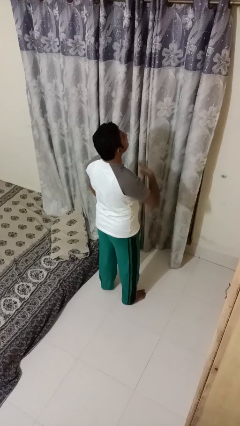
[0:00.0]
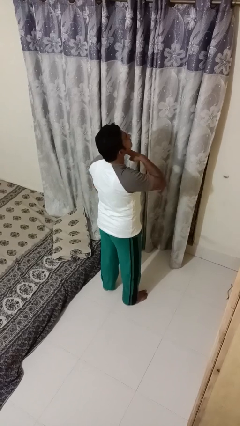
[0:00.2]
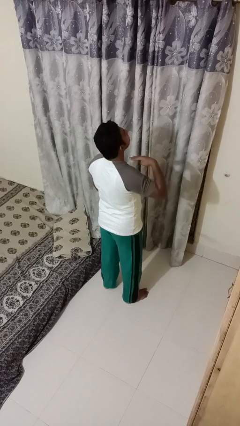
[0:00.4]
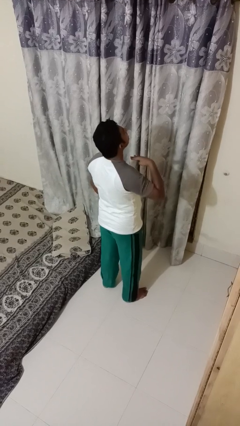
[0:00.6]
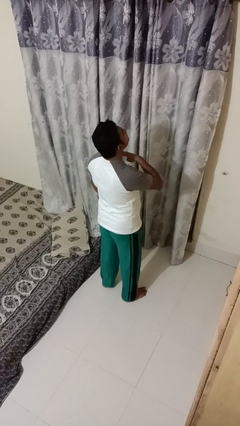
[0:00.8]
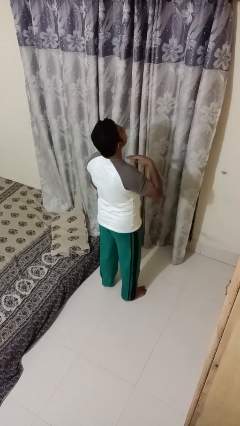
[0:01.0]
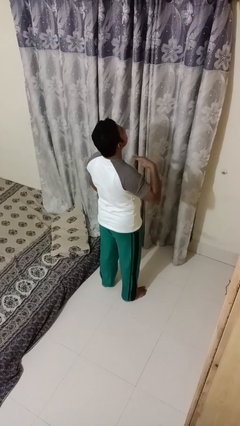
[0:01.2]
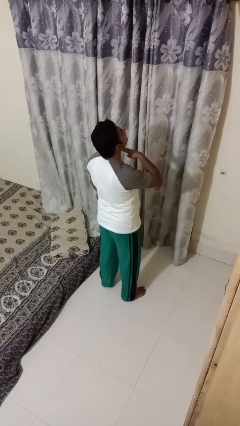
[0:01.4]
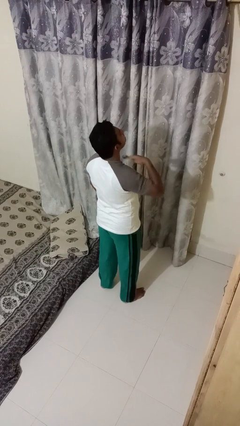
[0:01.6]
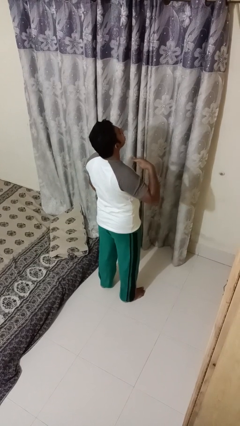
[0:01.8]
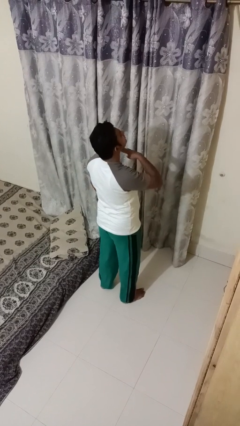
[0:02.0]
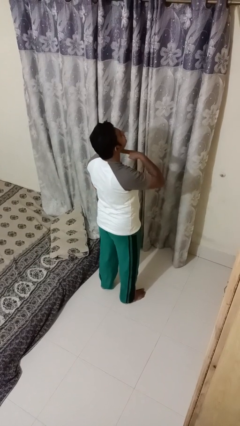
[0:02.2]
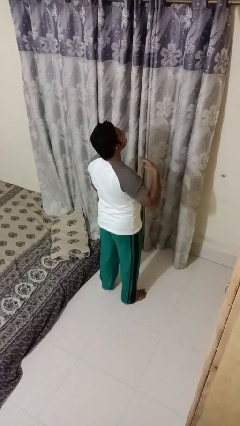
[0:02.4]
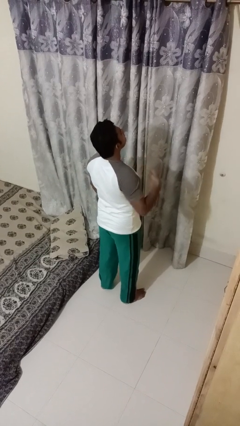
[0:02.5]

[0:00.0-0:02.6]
person gestures cut

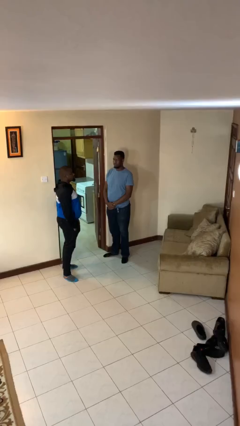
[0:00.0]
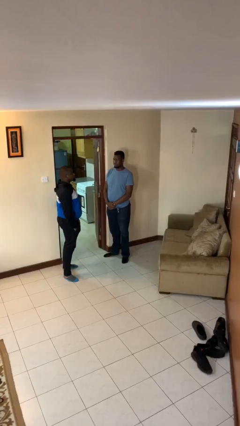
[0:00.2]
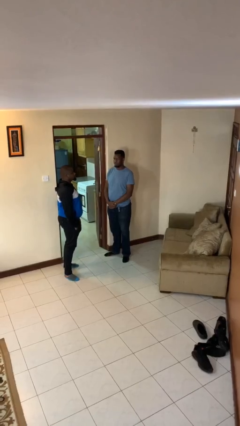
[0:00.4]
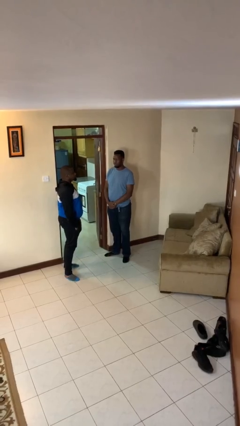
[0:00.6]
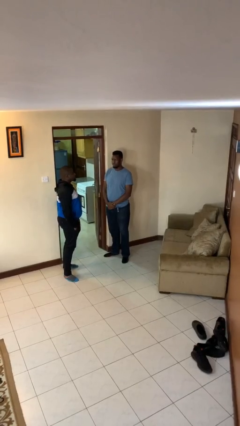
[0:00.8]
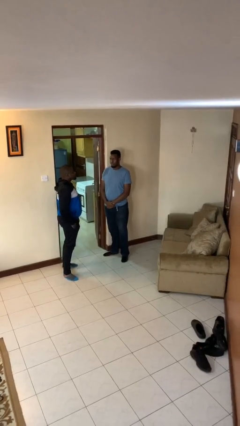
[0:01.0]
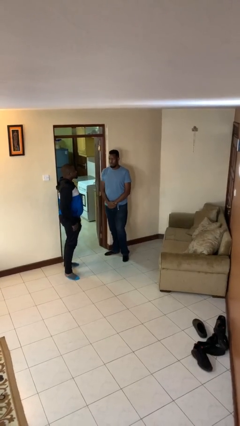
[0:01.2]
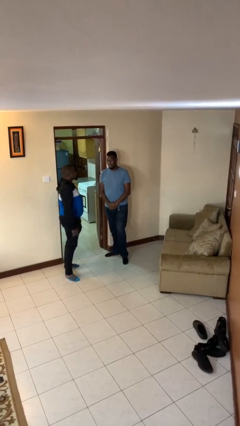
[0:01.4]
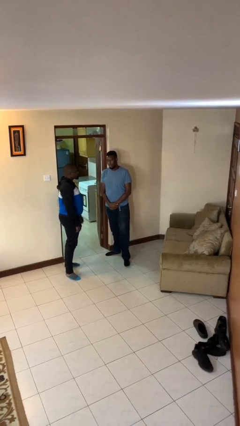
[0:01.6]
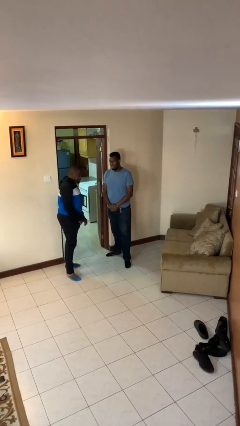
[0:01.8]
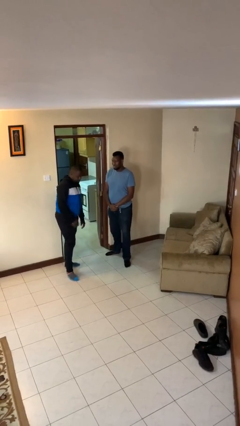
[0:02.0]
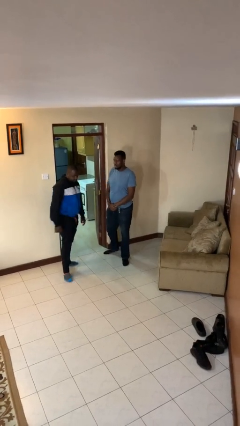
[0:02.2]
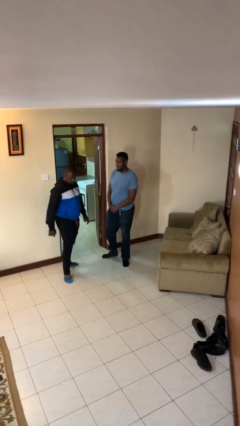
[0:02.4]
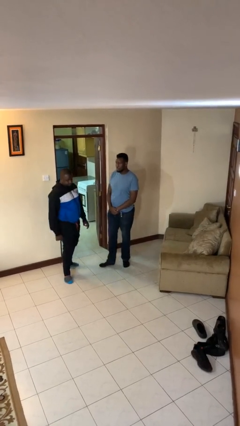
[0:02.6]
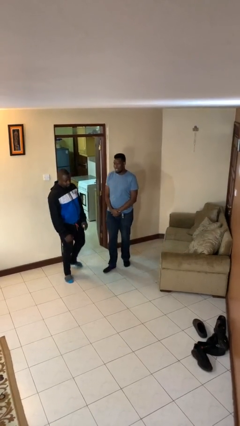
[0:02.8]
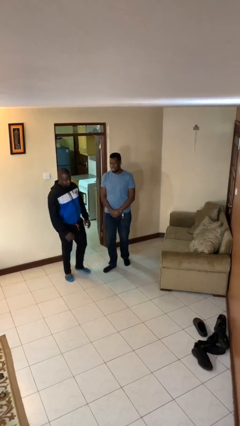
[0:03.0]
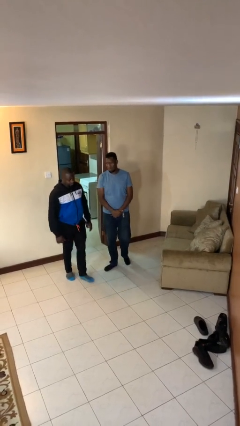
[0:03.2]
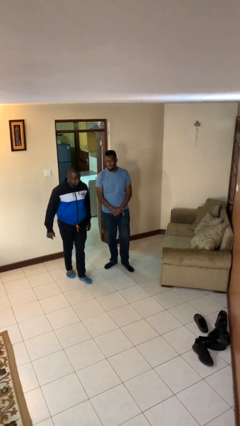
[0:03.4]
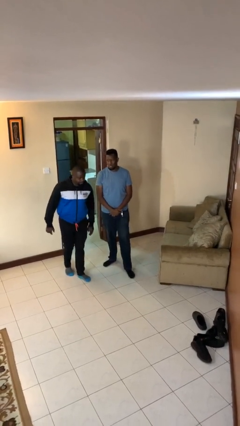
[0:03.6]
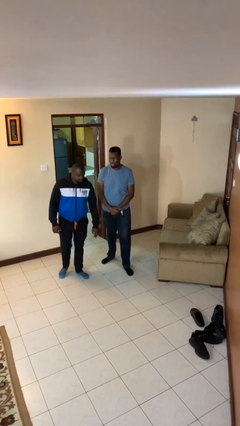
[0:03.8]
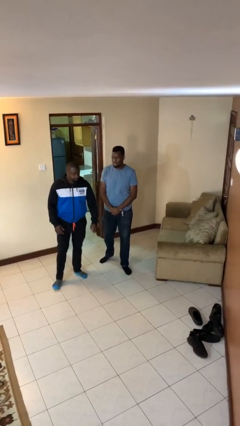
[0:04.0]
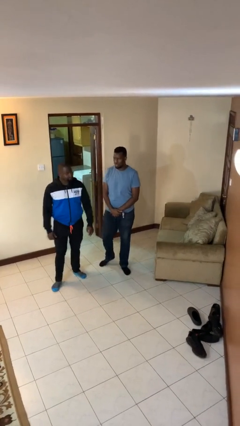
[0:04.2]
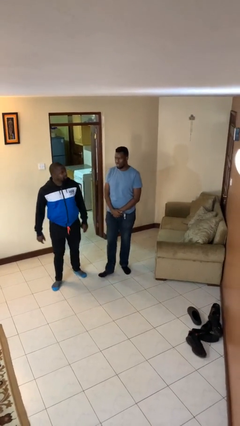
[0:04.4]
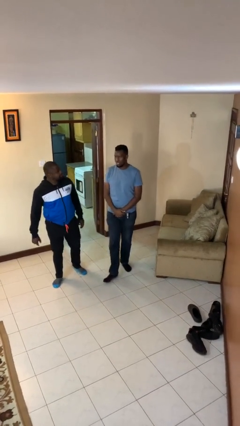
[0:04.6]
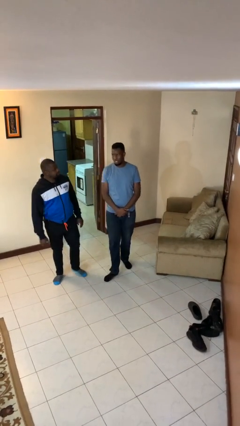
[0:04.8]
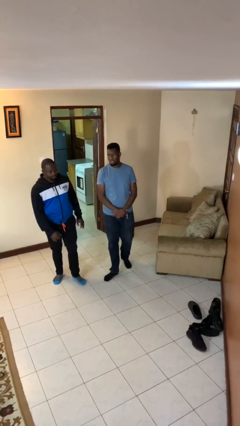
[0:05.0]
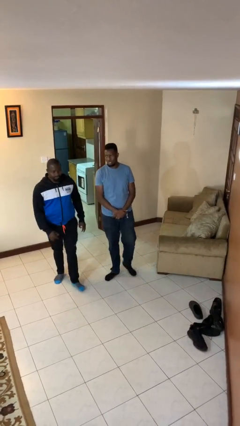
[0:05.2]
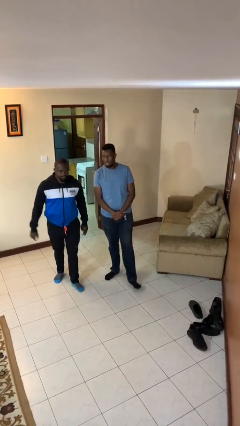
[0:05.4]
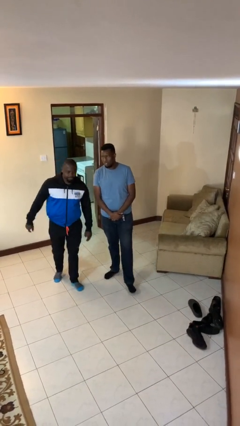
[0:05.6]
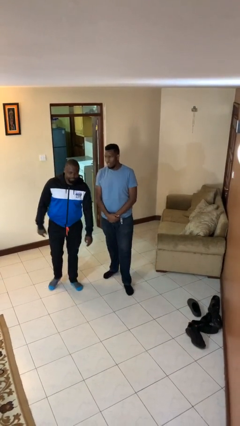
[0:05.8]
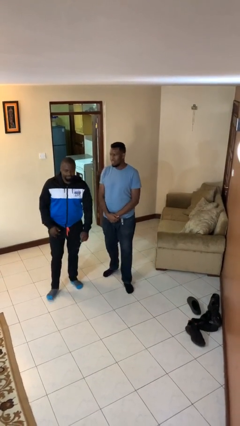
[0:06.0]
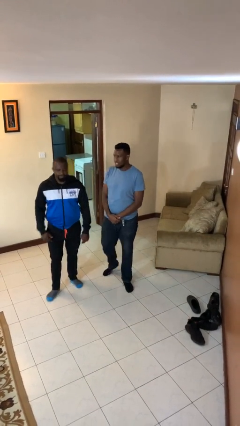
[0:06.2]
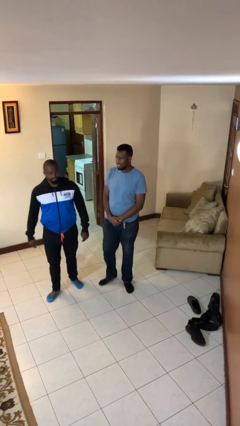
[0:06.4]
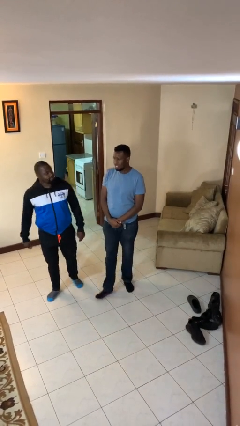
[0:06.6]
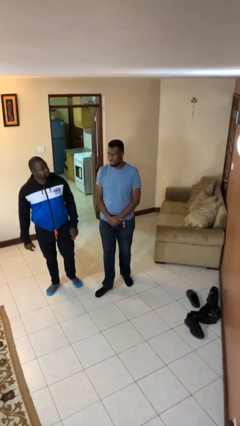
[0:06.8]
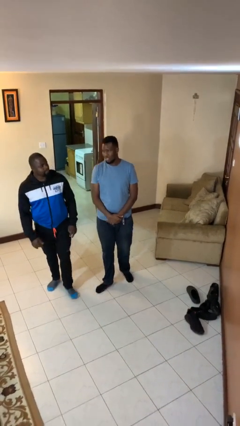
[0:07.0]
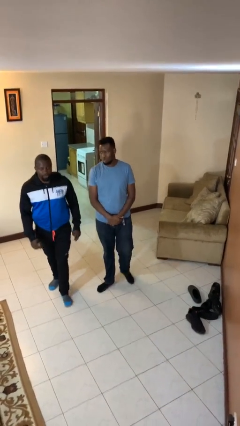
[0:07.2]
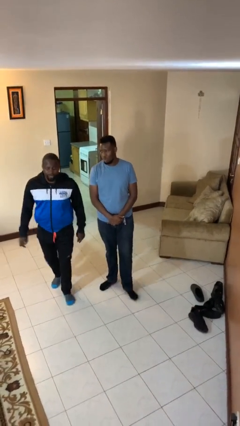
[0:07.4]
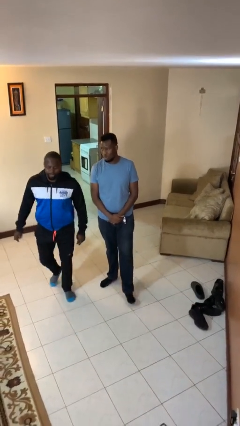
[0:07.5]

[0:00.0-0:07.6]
person talks to person

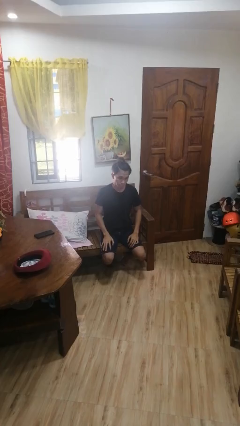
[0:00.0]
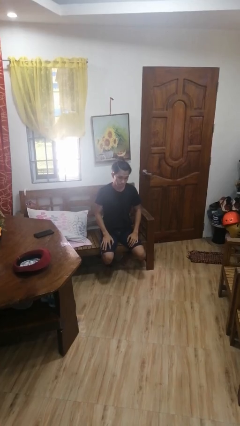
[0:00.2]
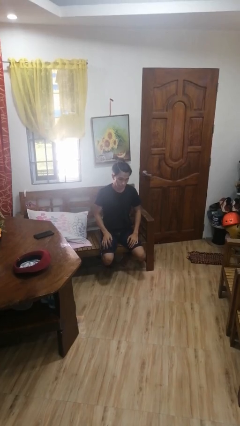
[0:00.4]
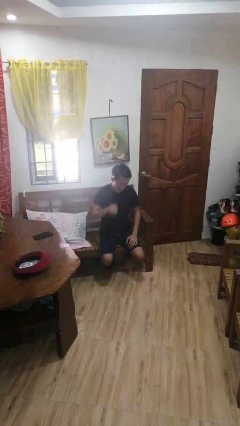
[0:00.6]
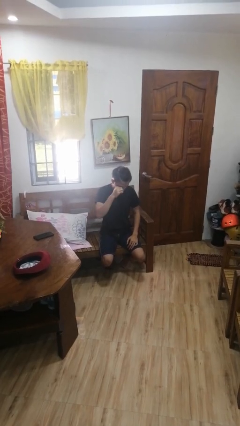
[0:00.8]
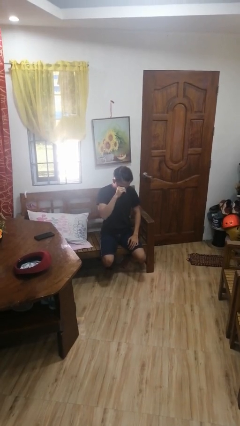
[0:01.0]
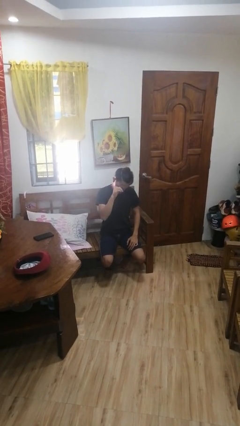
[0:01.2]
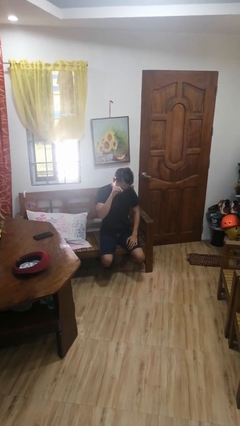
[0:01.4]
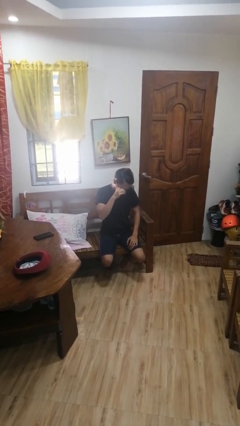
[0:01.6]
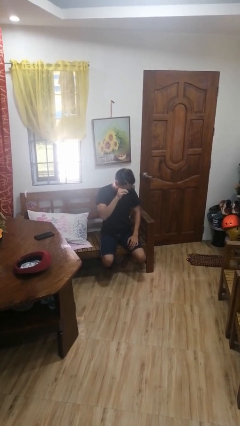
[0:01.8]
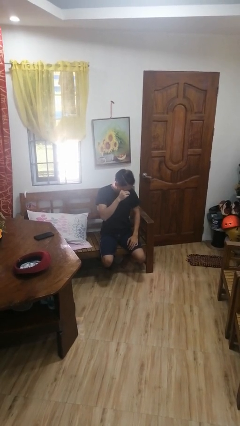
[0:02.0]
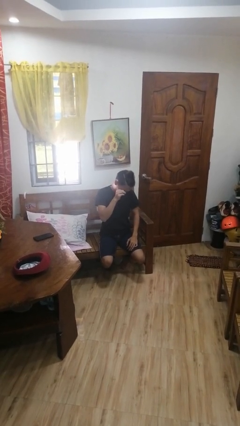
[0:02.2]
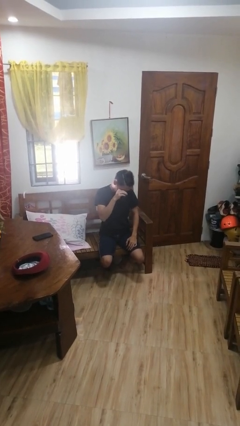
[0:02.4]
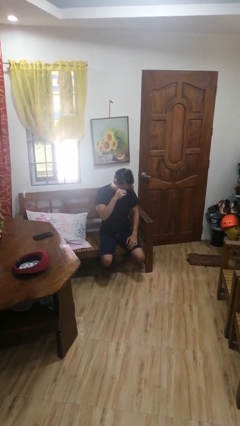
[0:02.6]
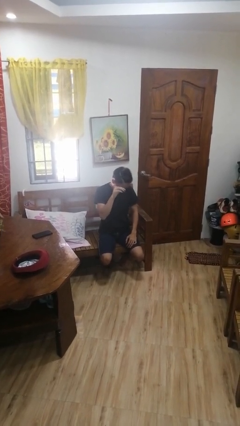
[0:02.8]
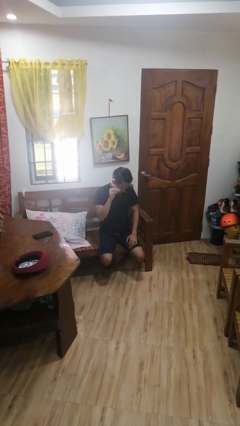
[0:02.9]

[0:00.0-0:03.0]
person rubs eyes

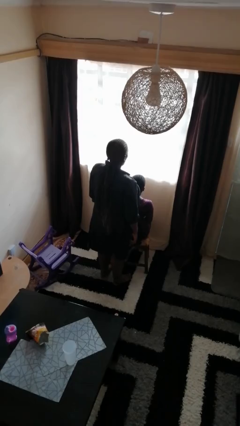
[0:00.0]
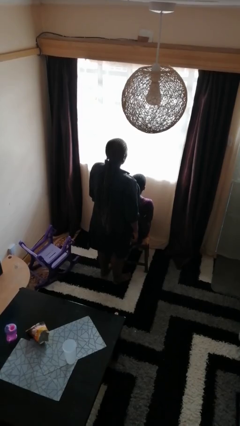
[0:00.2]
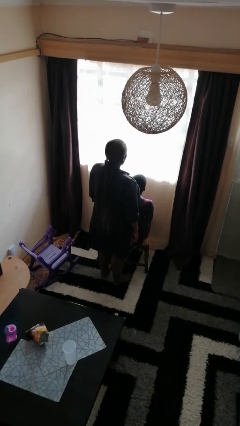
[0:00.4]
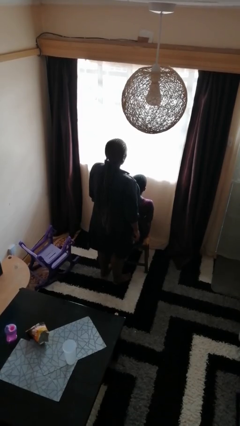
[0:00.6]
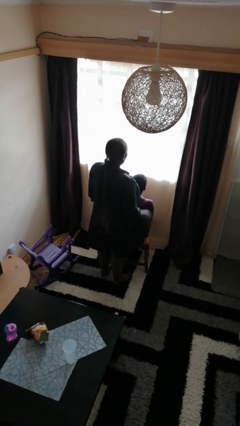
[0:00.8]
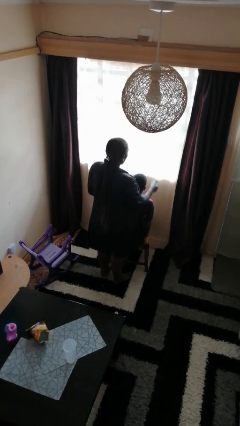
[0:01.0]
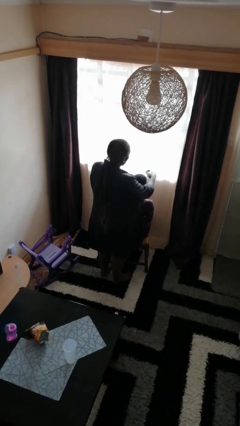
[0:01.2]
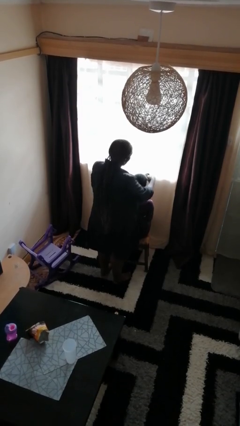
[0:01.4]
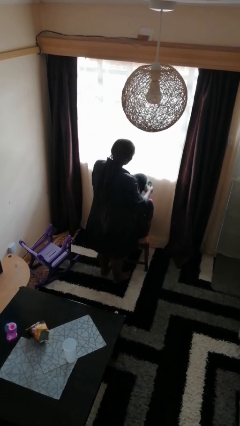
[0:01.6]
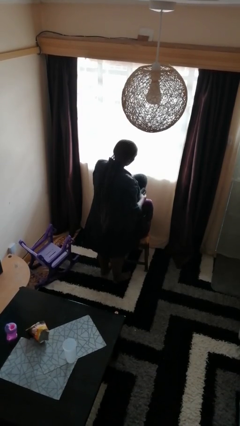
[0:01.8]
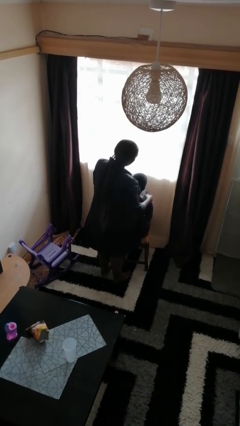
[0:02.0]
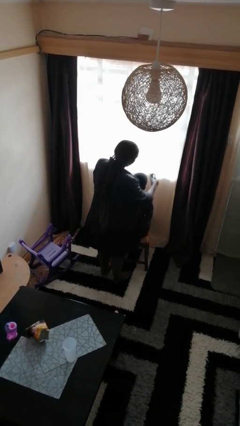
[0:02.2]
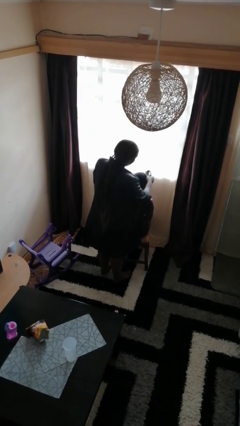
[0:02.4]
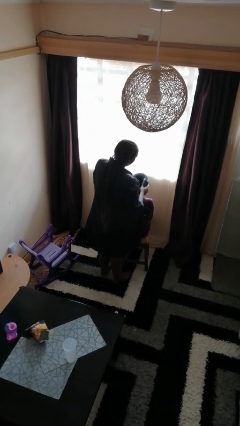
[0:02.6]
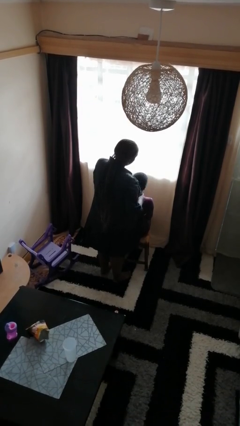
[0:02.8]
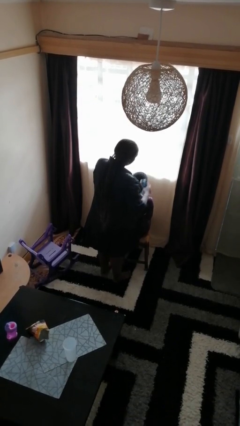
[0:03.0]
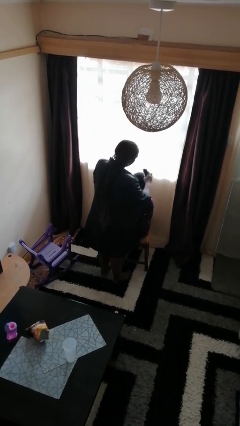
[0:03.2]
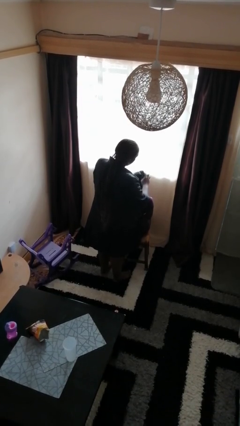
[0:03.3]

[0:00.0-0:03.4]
person brushes hair of person

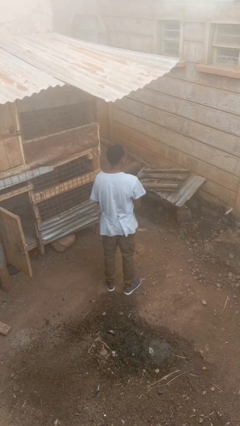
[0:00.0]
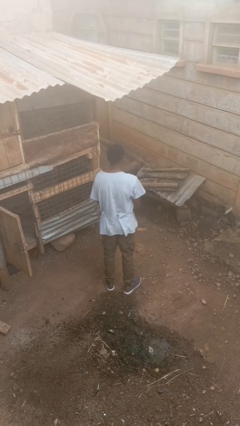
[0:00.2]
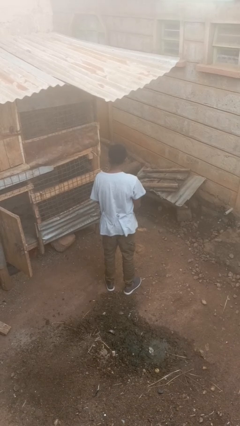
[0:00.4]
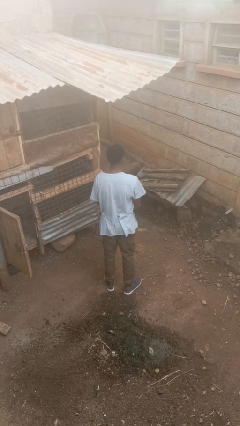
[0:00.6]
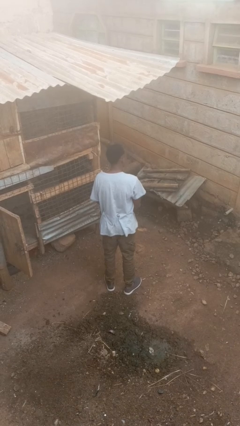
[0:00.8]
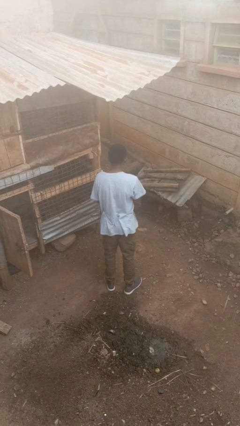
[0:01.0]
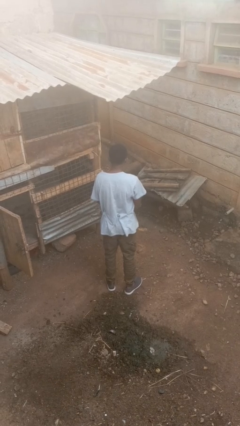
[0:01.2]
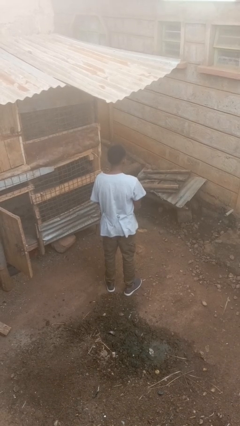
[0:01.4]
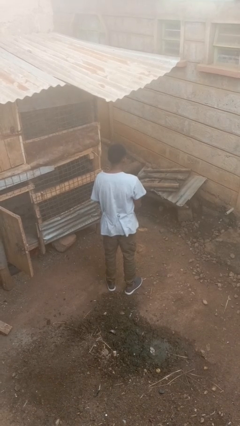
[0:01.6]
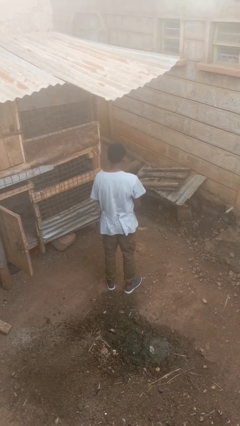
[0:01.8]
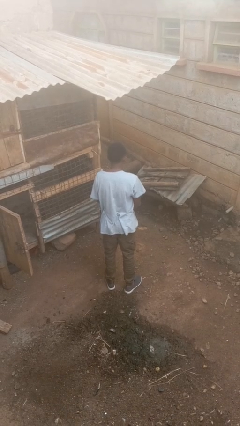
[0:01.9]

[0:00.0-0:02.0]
person shakes head
